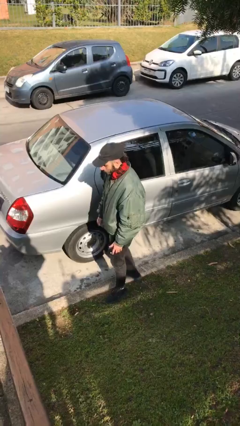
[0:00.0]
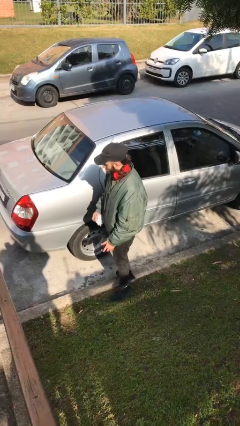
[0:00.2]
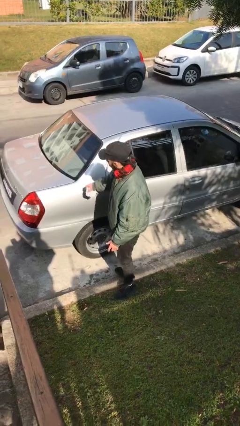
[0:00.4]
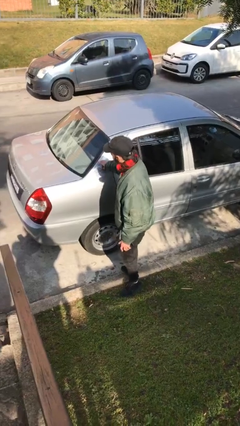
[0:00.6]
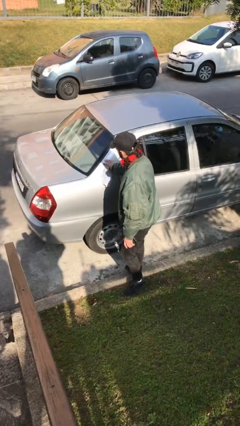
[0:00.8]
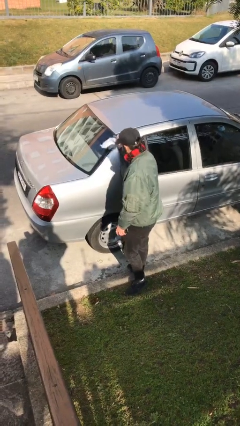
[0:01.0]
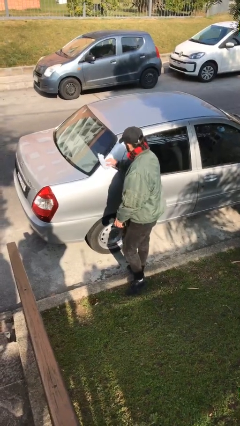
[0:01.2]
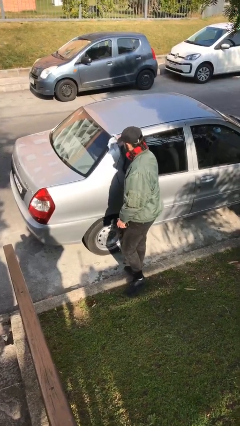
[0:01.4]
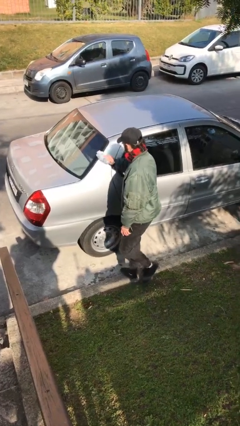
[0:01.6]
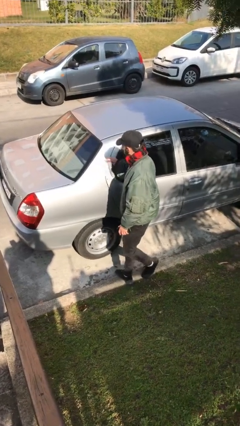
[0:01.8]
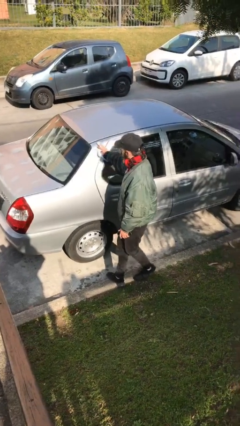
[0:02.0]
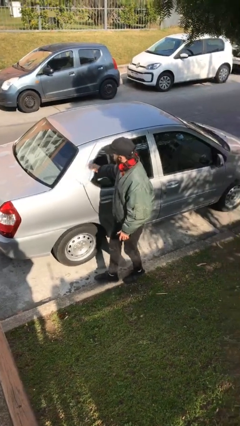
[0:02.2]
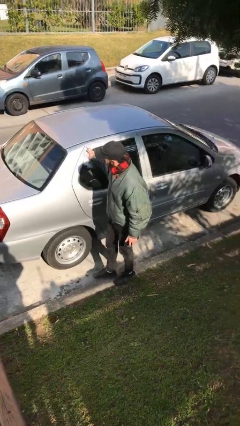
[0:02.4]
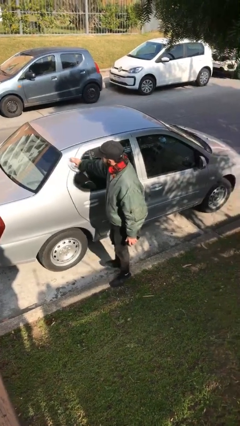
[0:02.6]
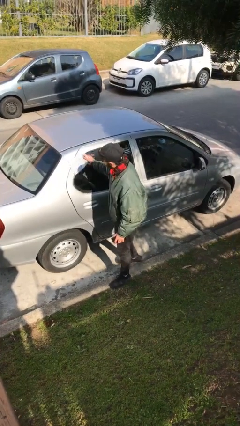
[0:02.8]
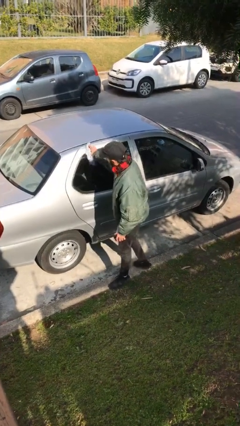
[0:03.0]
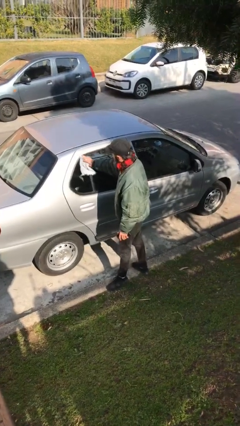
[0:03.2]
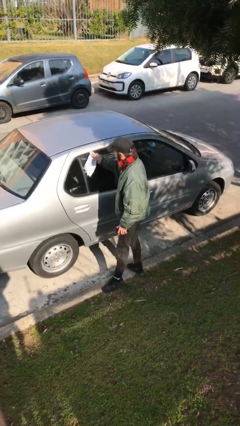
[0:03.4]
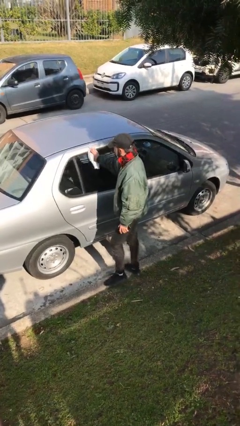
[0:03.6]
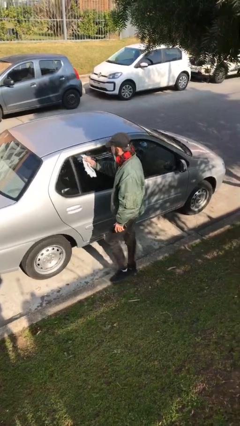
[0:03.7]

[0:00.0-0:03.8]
person polishes car with rag

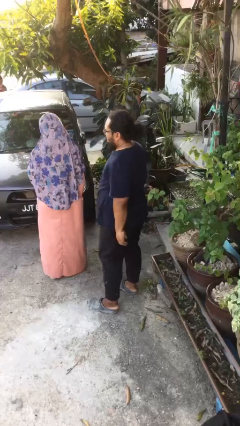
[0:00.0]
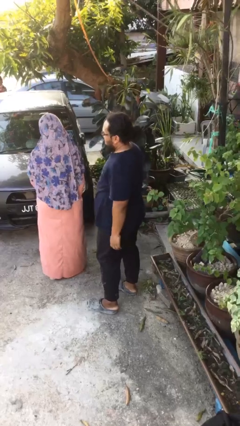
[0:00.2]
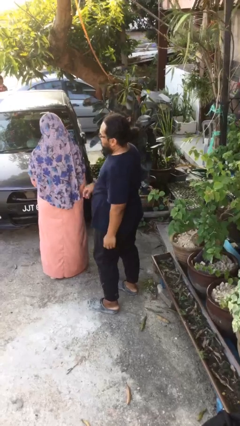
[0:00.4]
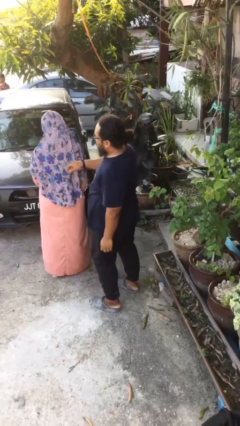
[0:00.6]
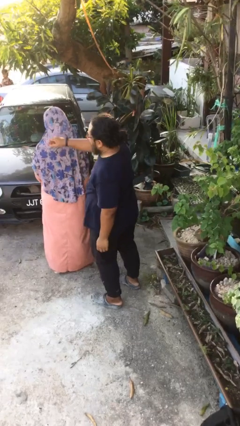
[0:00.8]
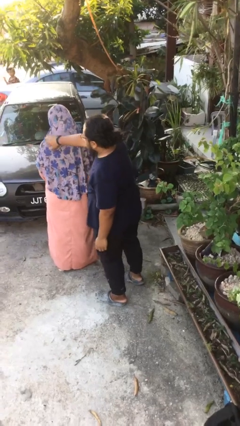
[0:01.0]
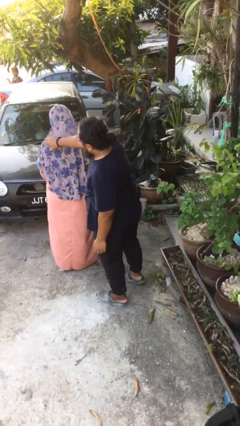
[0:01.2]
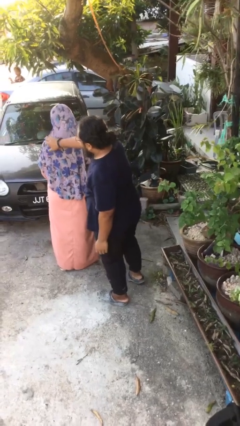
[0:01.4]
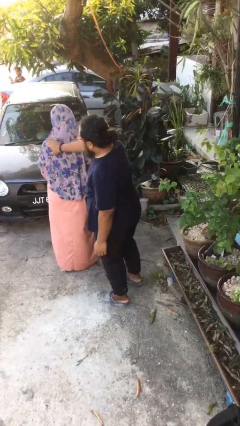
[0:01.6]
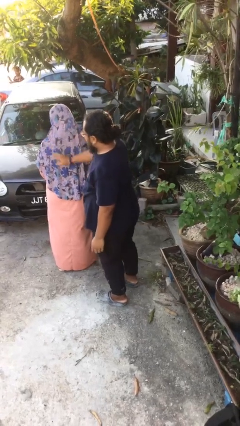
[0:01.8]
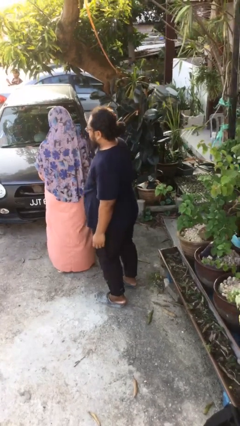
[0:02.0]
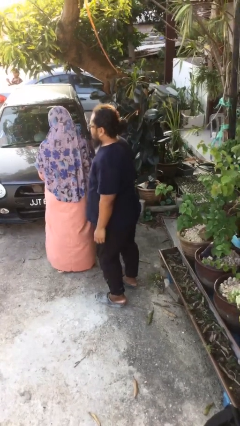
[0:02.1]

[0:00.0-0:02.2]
person touches back of person

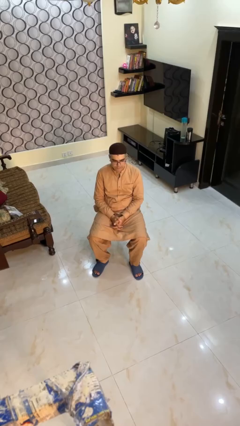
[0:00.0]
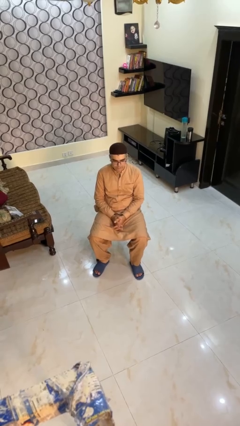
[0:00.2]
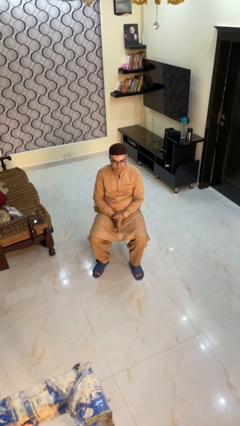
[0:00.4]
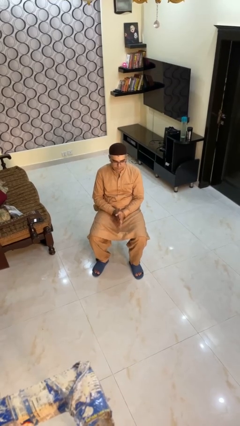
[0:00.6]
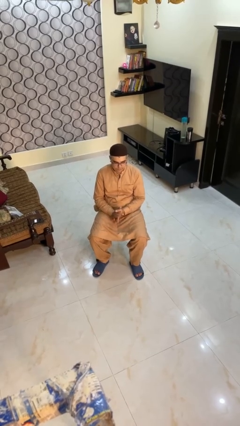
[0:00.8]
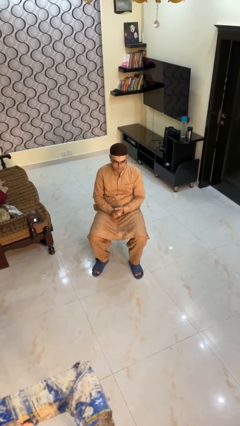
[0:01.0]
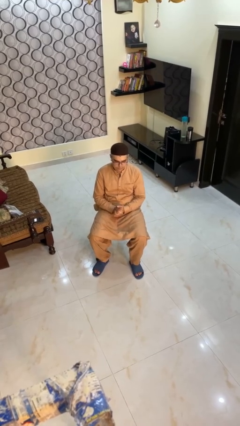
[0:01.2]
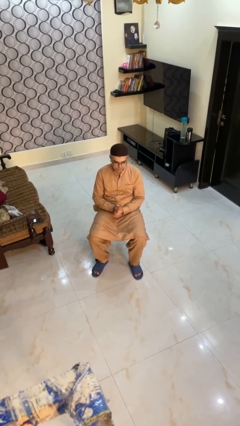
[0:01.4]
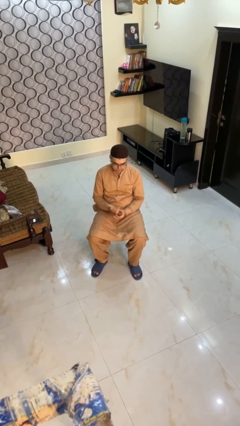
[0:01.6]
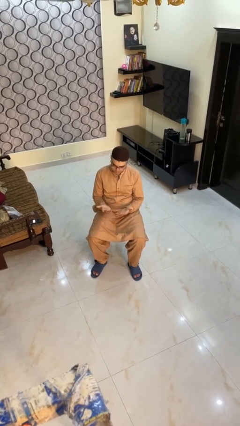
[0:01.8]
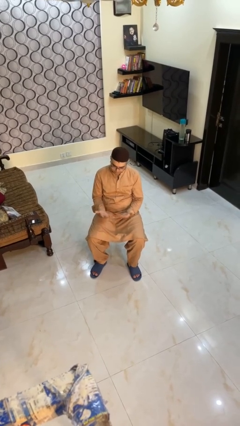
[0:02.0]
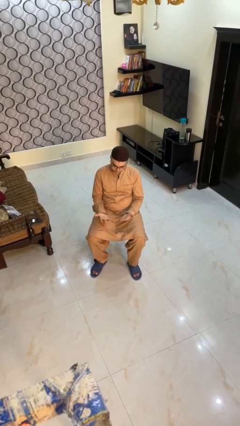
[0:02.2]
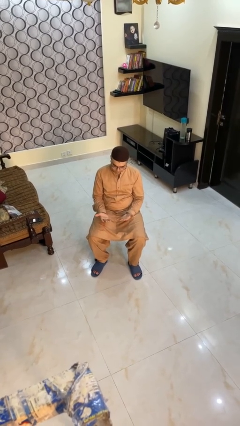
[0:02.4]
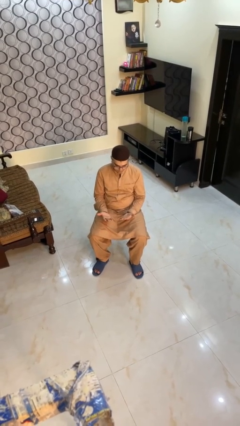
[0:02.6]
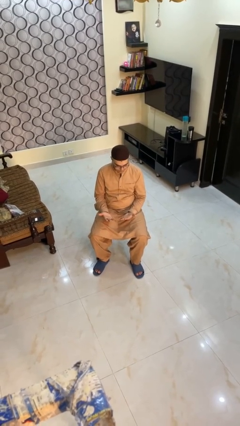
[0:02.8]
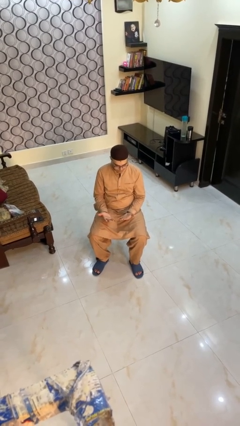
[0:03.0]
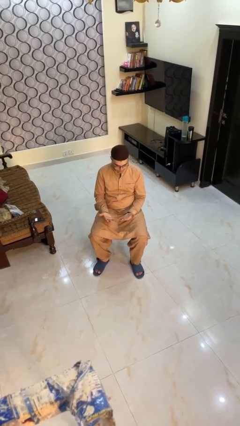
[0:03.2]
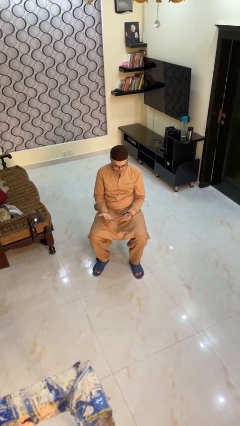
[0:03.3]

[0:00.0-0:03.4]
person looks at hands in lap

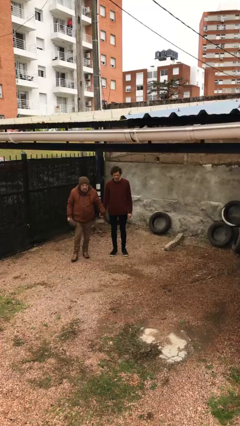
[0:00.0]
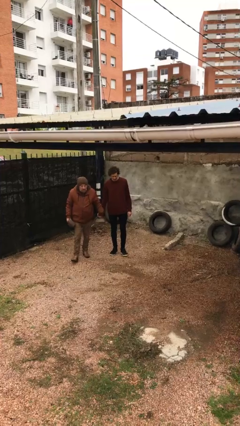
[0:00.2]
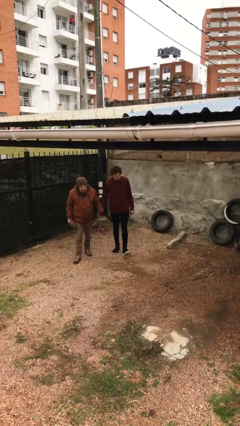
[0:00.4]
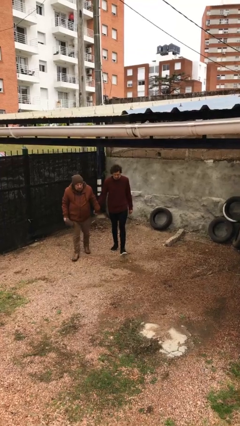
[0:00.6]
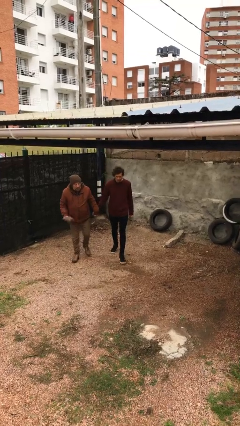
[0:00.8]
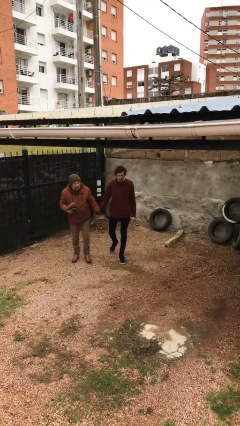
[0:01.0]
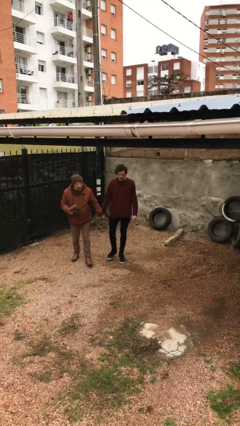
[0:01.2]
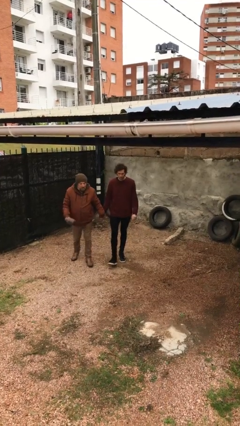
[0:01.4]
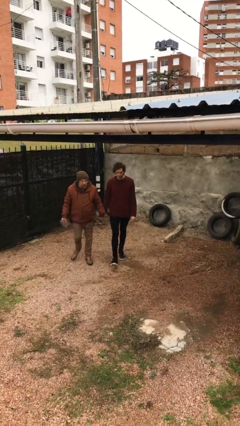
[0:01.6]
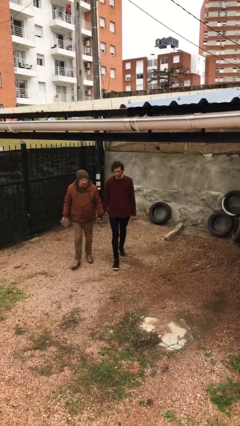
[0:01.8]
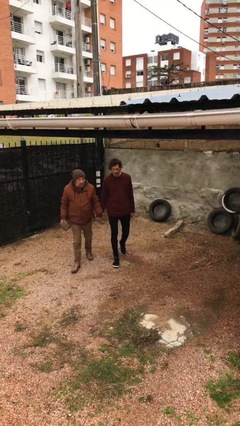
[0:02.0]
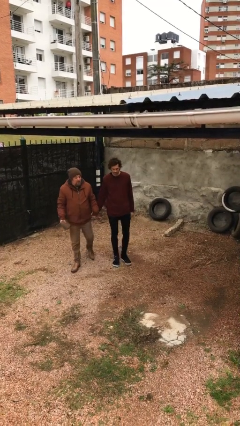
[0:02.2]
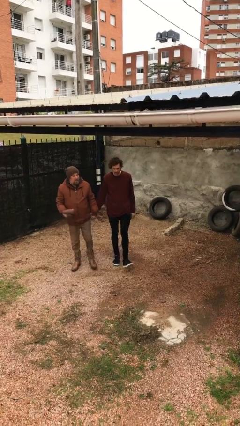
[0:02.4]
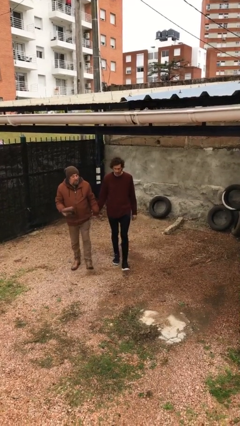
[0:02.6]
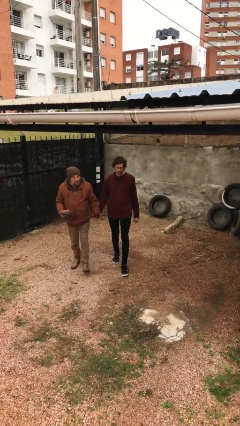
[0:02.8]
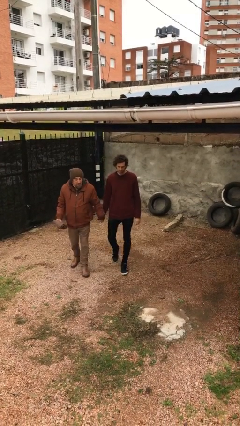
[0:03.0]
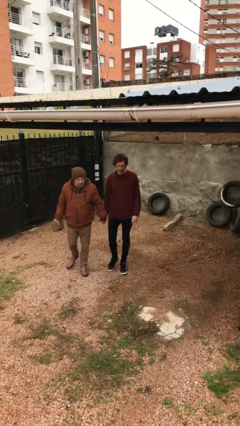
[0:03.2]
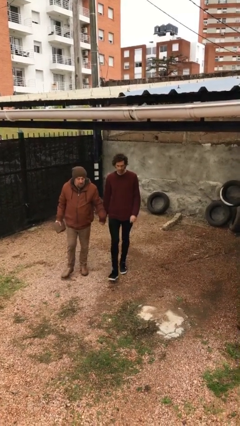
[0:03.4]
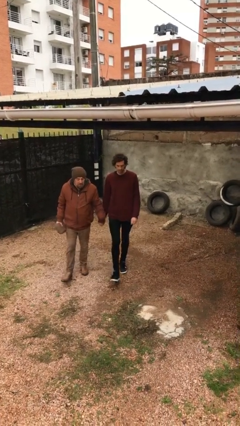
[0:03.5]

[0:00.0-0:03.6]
person holds hand

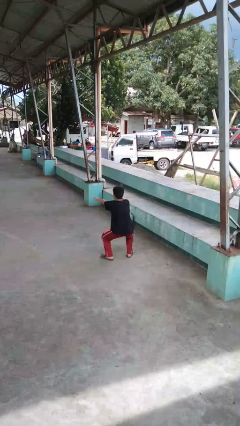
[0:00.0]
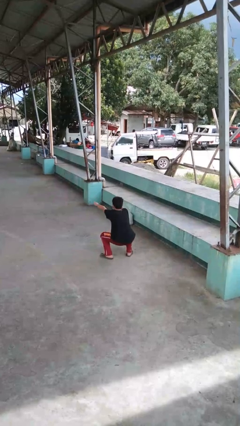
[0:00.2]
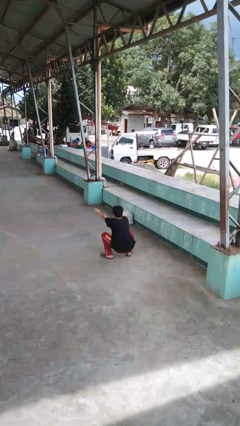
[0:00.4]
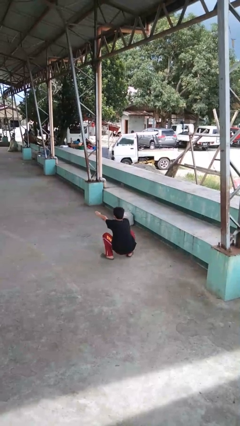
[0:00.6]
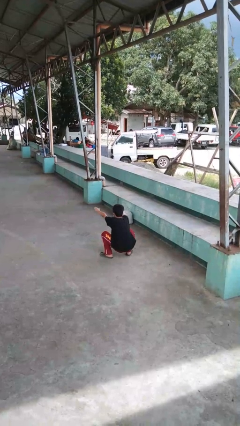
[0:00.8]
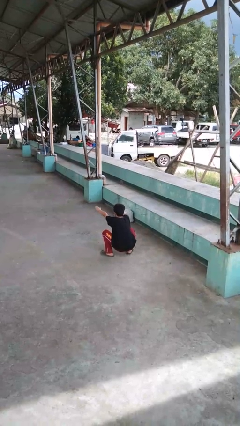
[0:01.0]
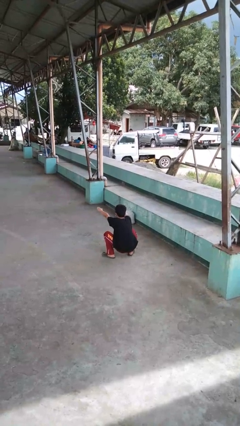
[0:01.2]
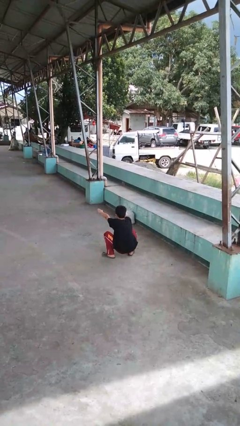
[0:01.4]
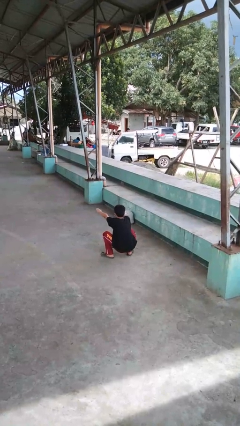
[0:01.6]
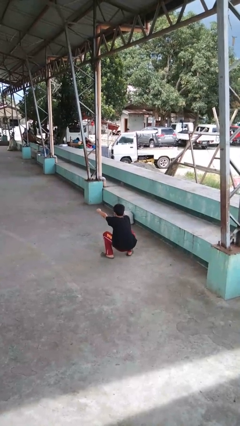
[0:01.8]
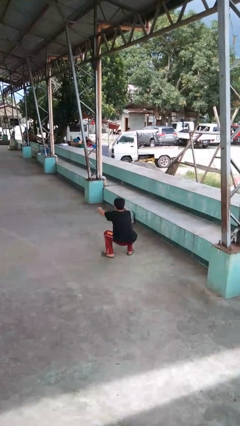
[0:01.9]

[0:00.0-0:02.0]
person squats

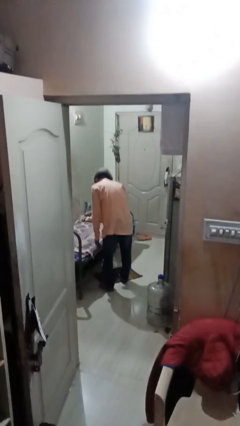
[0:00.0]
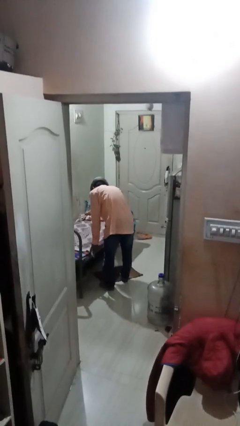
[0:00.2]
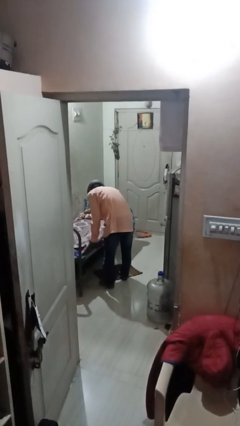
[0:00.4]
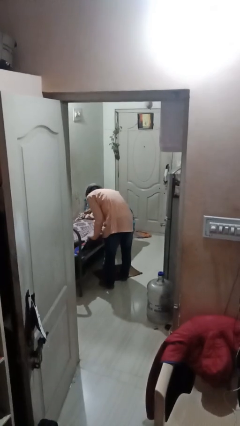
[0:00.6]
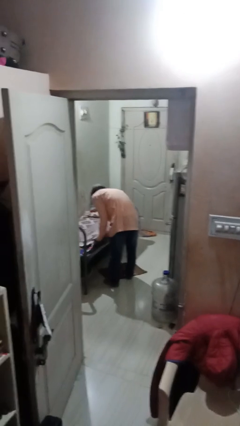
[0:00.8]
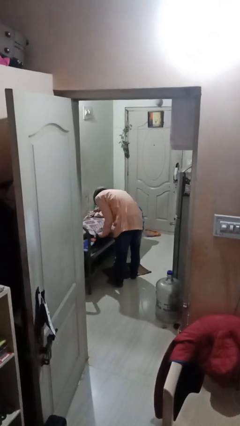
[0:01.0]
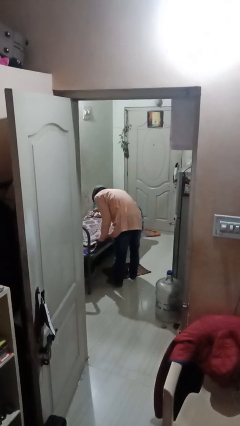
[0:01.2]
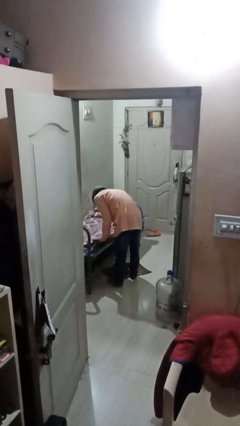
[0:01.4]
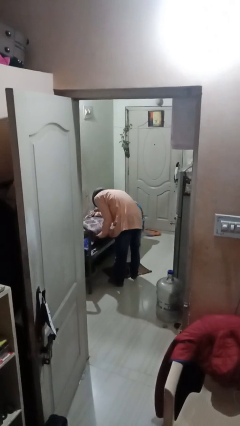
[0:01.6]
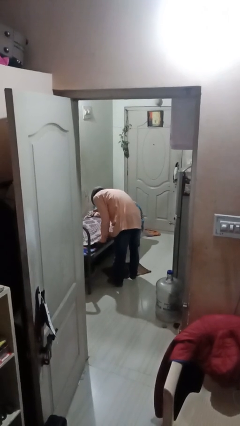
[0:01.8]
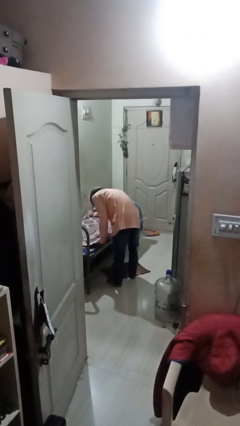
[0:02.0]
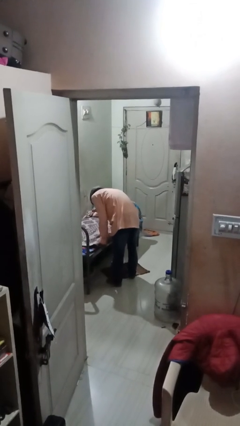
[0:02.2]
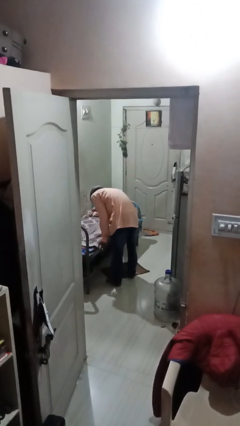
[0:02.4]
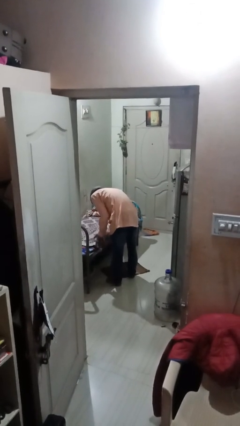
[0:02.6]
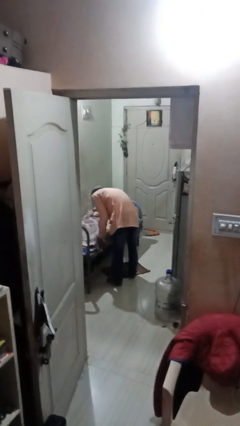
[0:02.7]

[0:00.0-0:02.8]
person makes bed
